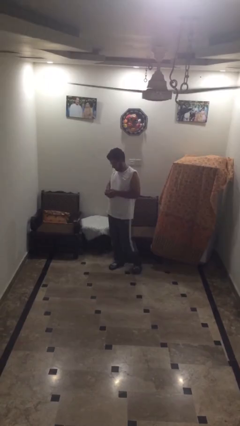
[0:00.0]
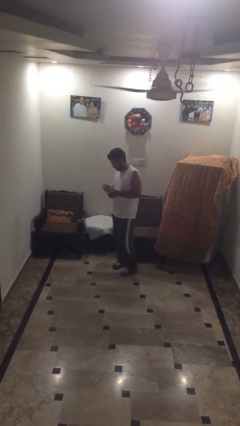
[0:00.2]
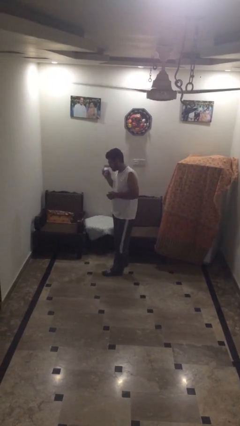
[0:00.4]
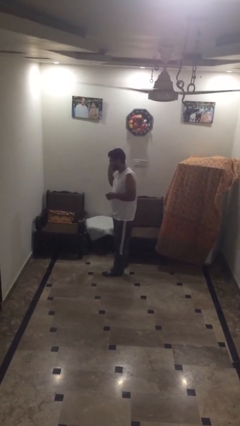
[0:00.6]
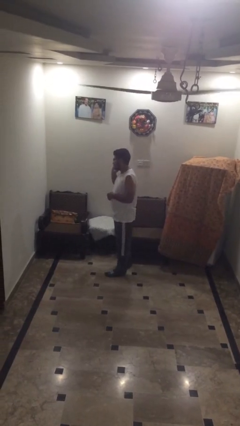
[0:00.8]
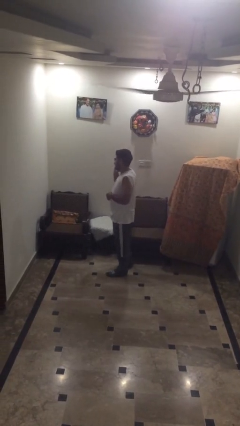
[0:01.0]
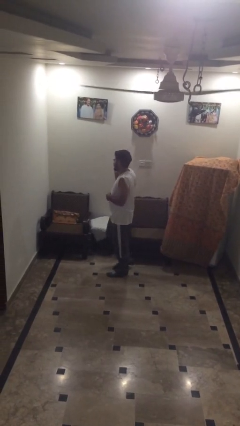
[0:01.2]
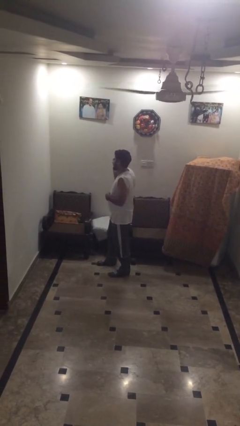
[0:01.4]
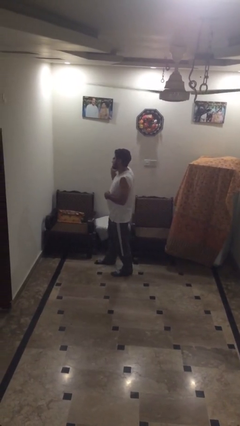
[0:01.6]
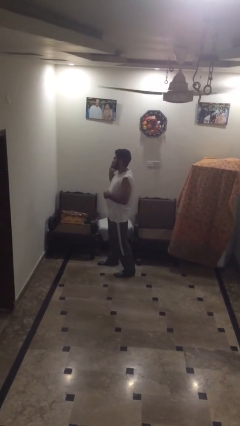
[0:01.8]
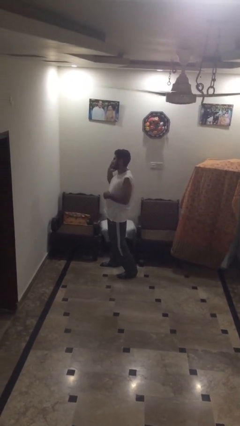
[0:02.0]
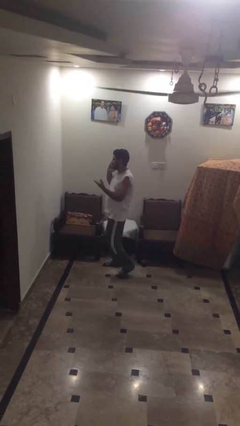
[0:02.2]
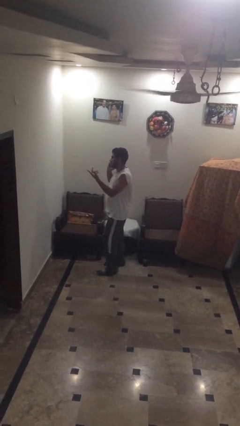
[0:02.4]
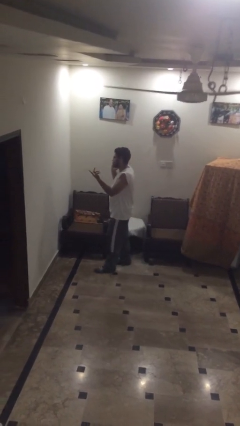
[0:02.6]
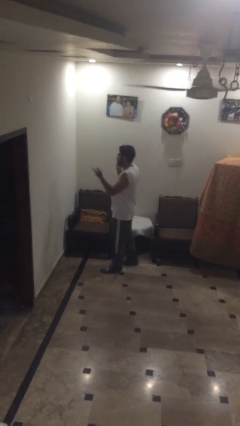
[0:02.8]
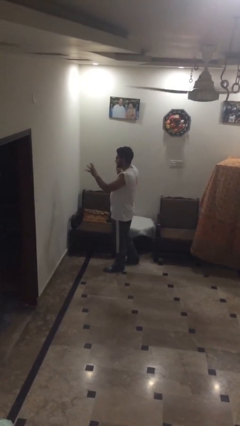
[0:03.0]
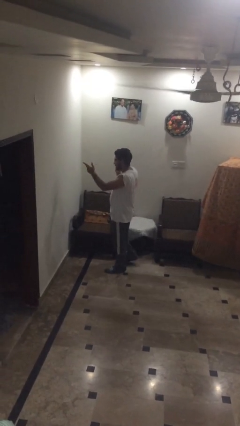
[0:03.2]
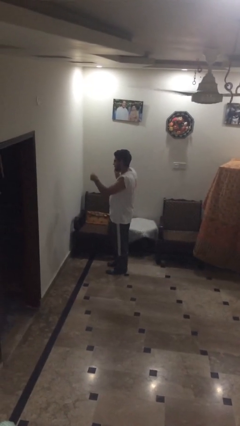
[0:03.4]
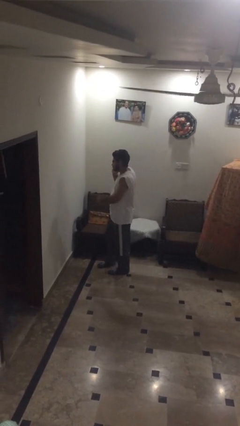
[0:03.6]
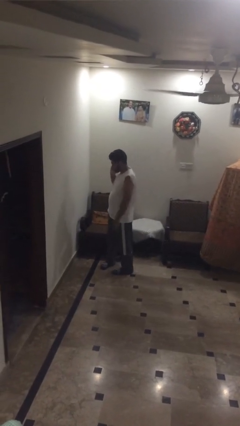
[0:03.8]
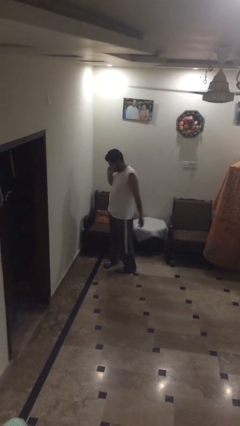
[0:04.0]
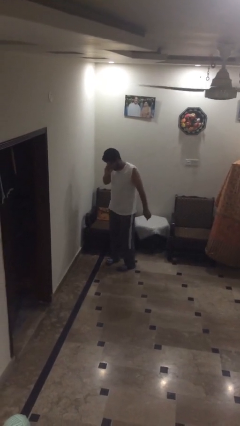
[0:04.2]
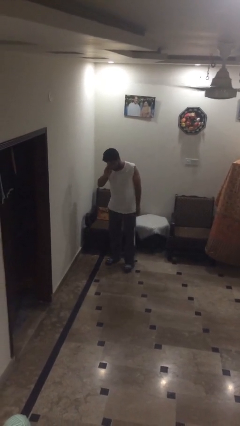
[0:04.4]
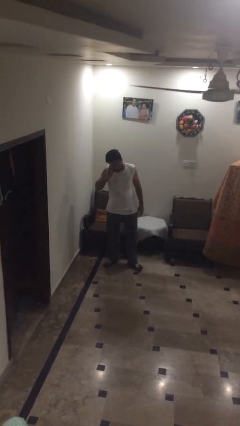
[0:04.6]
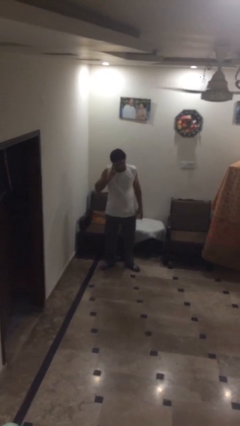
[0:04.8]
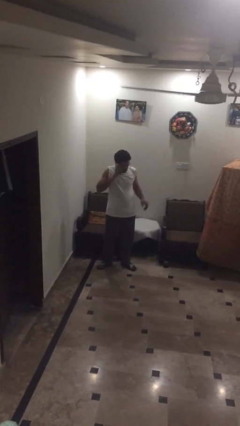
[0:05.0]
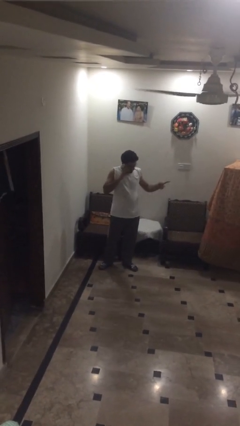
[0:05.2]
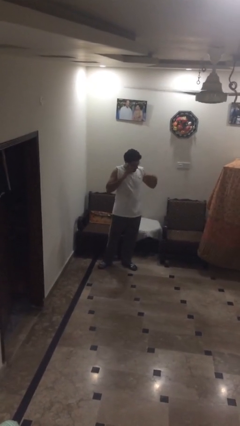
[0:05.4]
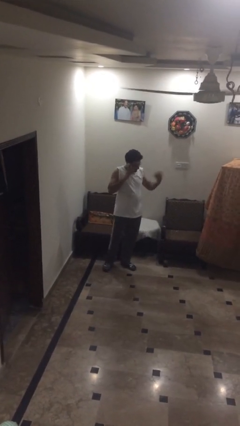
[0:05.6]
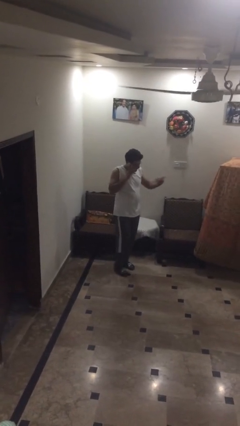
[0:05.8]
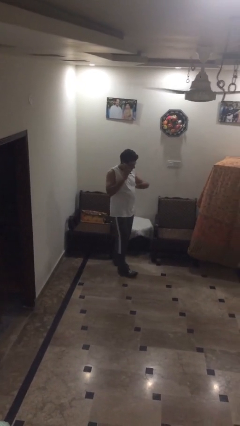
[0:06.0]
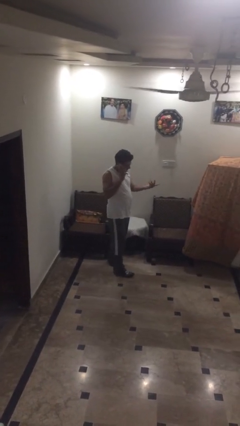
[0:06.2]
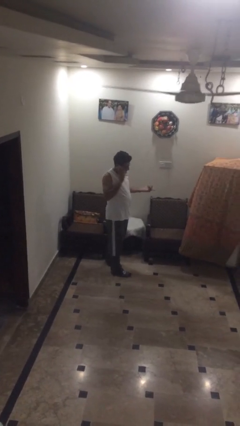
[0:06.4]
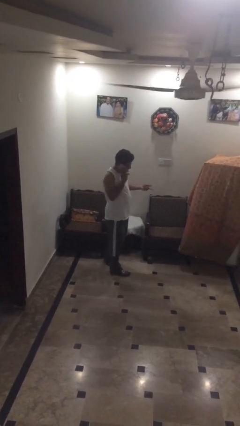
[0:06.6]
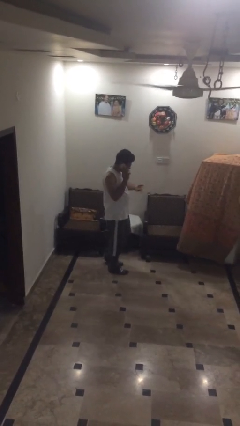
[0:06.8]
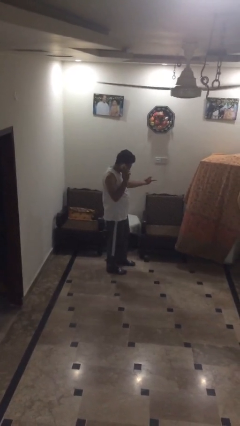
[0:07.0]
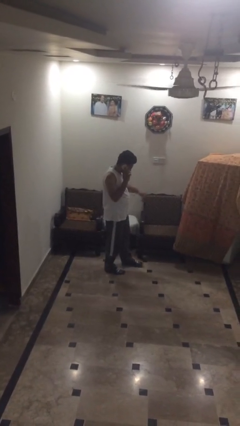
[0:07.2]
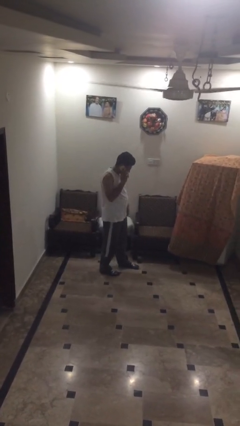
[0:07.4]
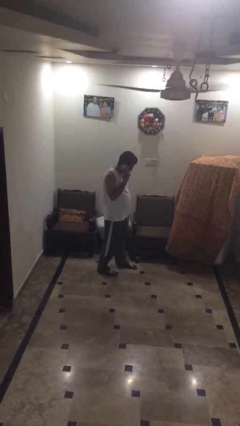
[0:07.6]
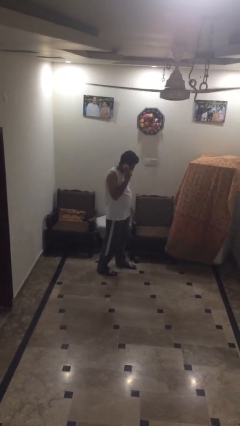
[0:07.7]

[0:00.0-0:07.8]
person talks on phone

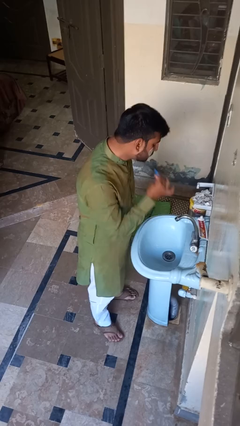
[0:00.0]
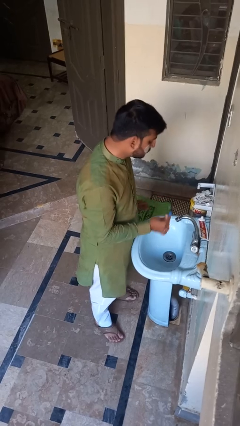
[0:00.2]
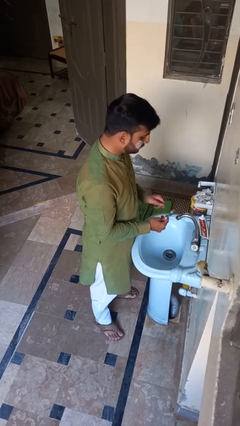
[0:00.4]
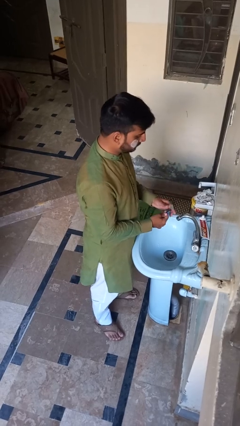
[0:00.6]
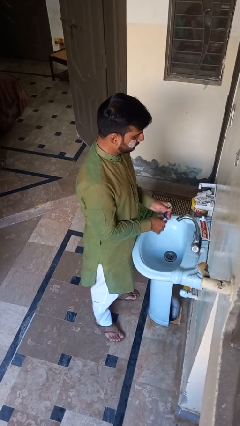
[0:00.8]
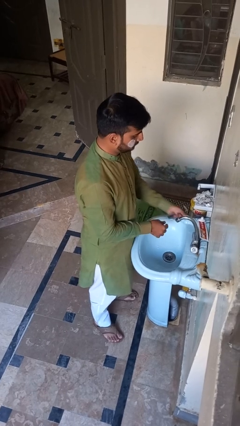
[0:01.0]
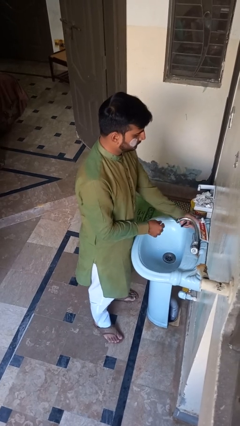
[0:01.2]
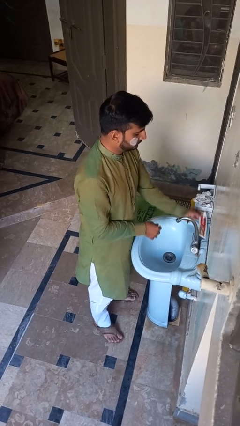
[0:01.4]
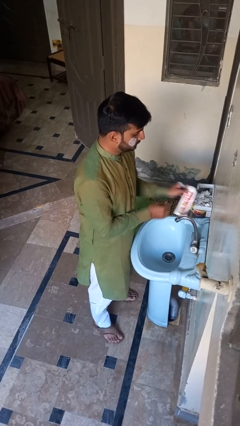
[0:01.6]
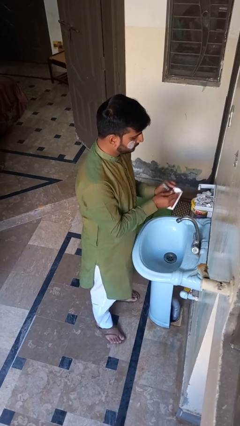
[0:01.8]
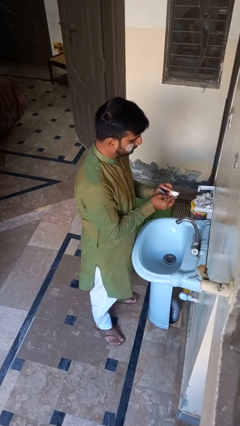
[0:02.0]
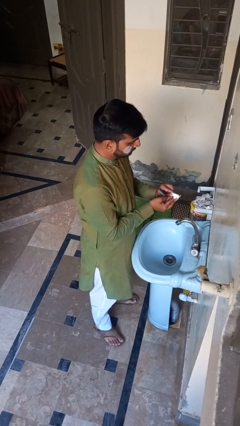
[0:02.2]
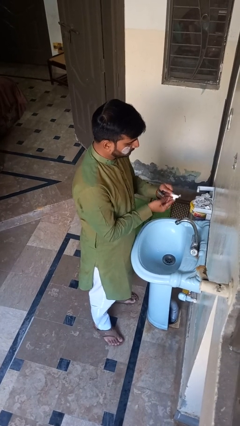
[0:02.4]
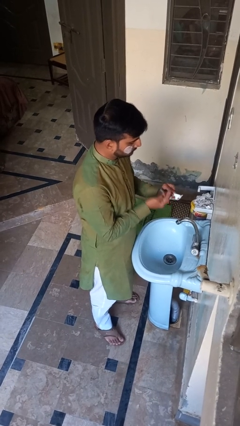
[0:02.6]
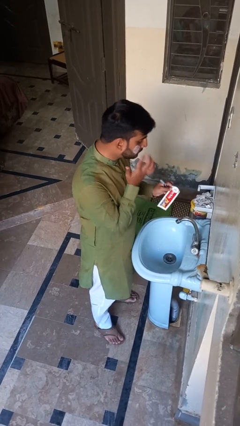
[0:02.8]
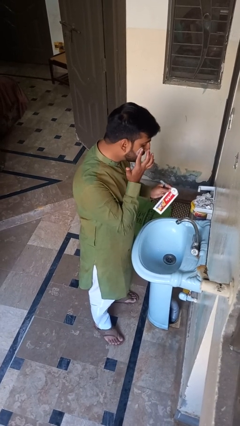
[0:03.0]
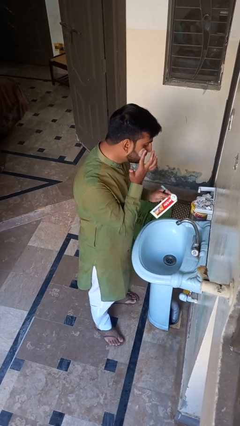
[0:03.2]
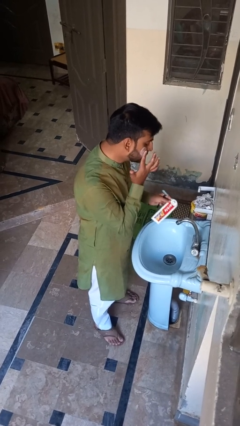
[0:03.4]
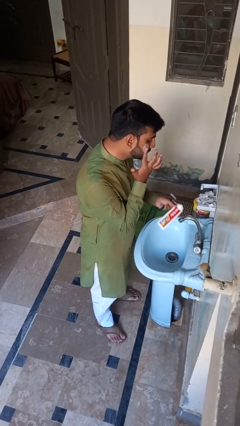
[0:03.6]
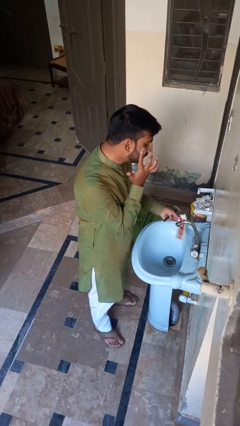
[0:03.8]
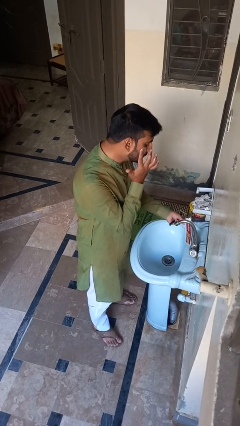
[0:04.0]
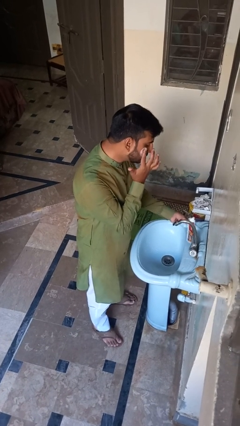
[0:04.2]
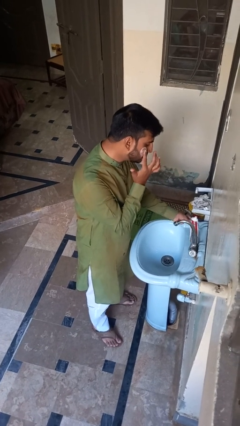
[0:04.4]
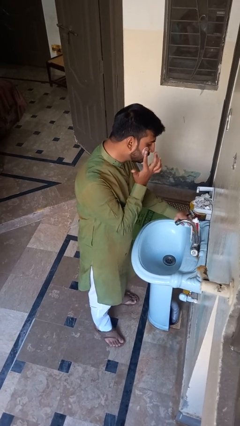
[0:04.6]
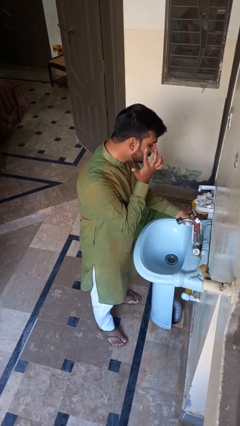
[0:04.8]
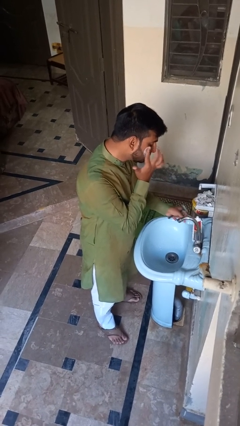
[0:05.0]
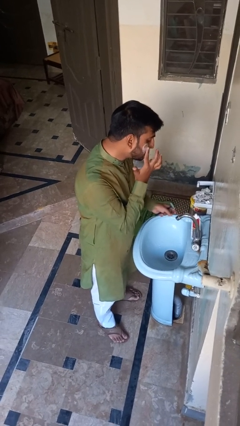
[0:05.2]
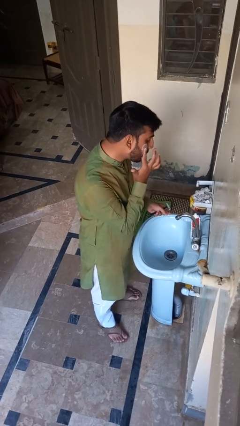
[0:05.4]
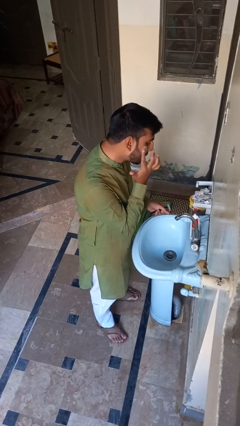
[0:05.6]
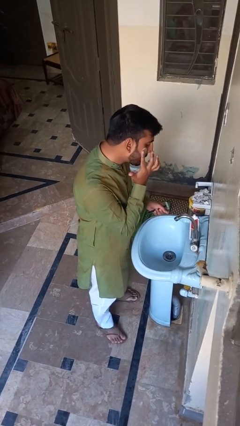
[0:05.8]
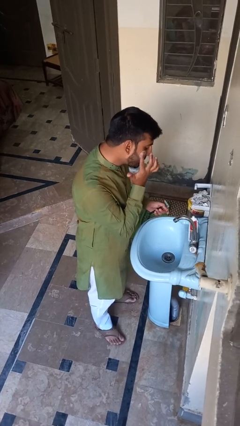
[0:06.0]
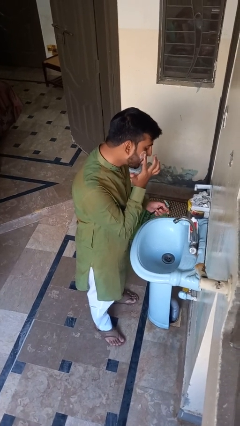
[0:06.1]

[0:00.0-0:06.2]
person applies shaving cream

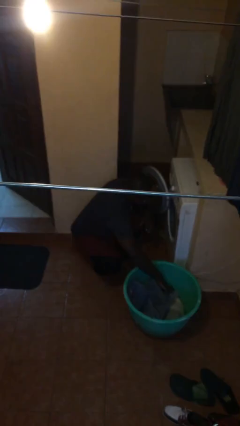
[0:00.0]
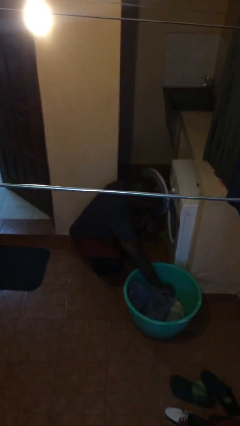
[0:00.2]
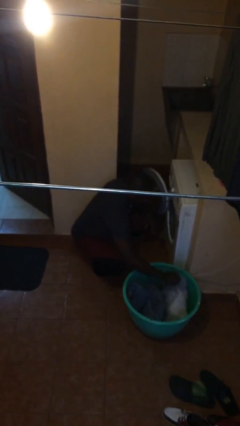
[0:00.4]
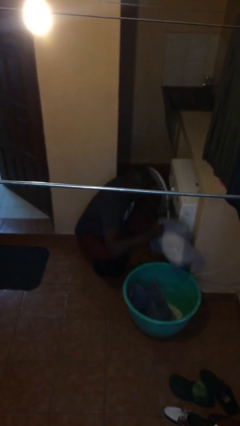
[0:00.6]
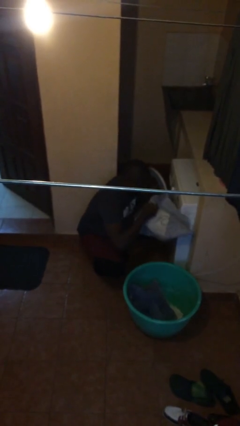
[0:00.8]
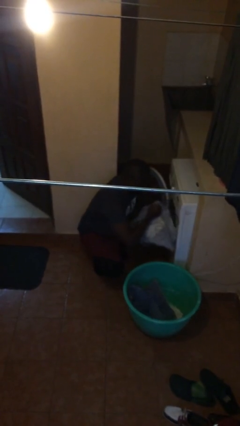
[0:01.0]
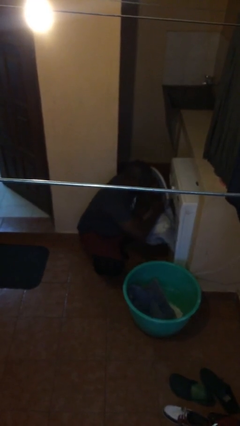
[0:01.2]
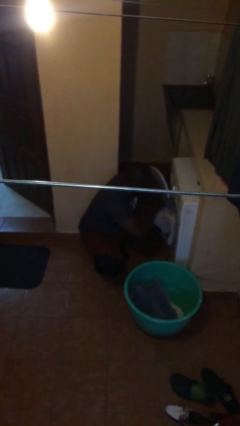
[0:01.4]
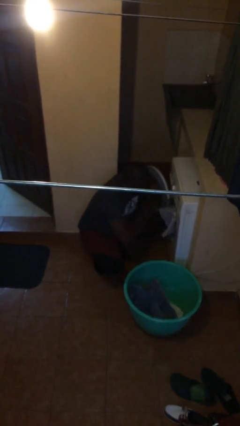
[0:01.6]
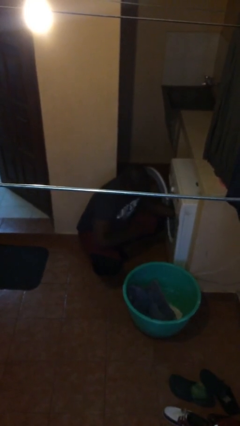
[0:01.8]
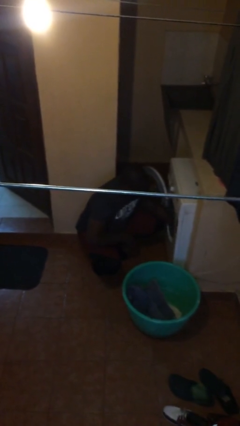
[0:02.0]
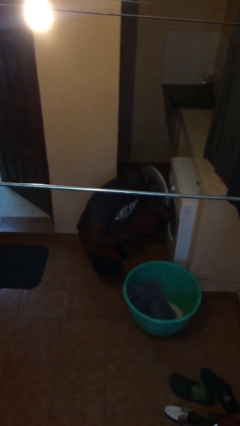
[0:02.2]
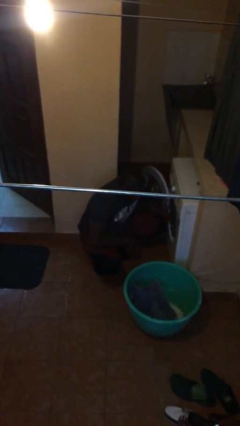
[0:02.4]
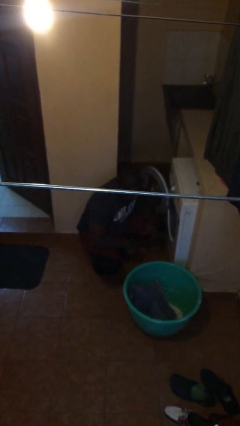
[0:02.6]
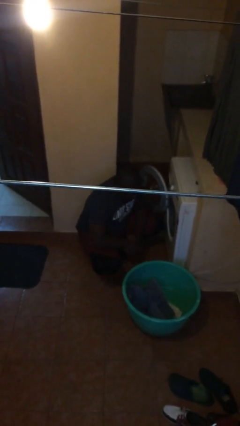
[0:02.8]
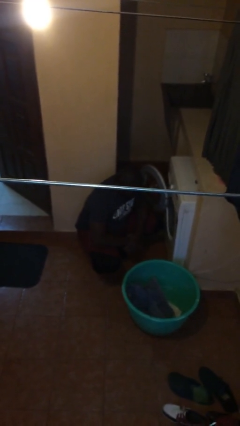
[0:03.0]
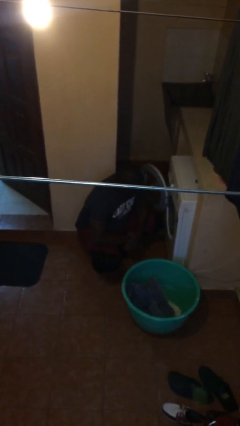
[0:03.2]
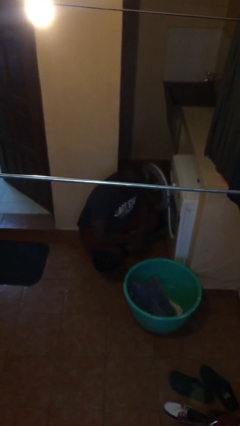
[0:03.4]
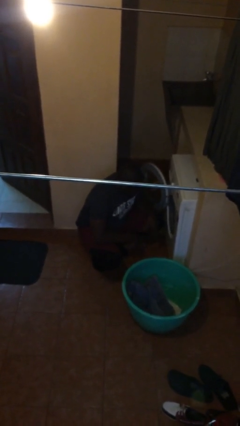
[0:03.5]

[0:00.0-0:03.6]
person loads dryer

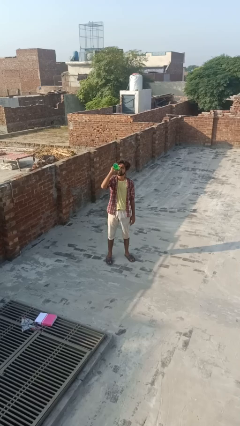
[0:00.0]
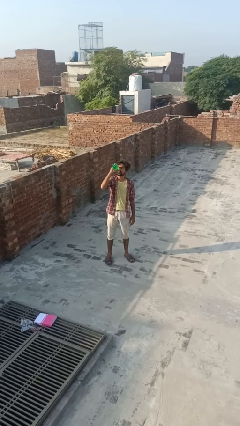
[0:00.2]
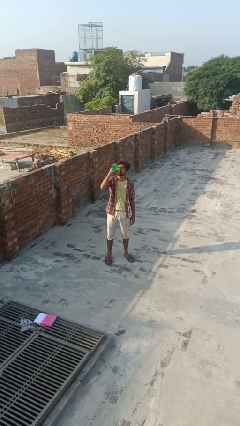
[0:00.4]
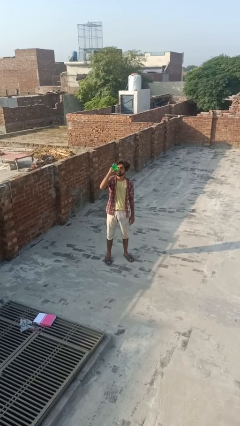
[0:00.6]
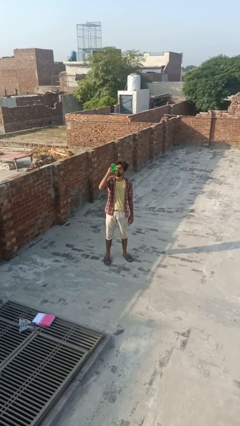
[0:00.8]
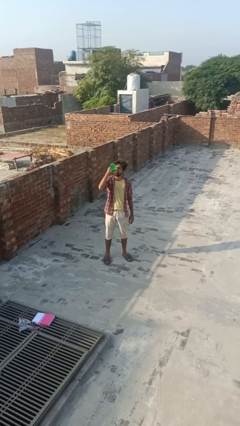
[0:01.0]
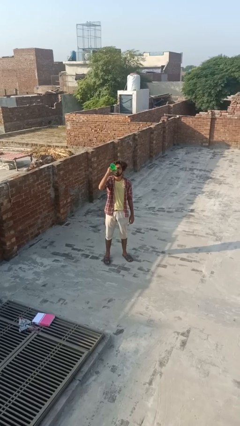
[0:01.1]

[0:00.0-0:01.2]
person drinks from bottle
